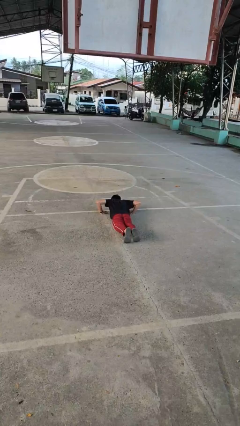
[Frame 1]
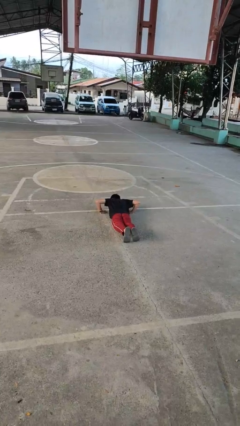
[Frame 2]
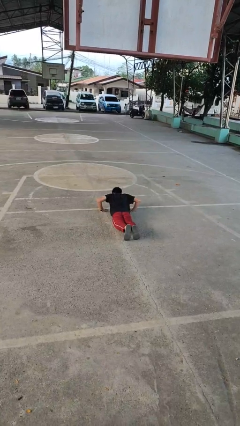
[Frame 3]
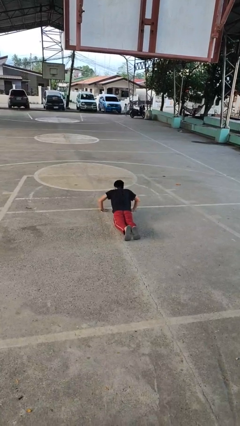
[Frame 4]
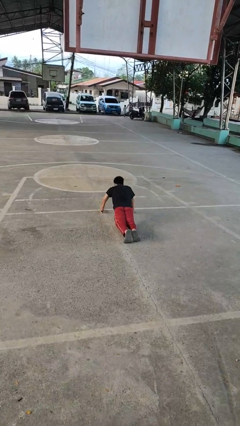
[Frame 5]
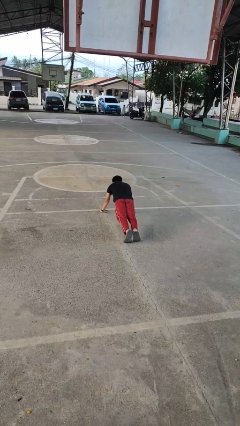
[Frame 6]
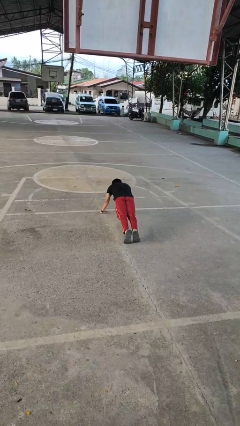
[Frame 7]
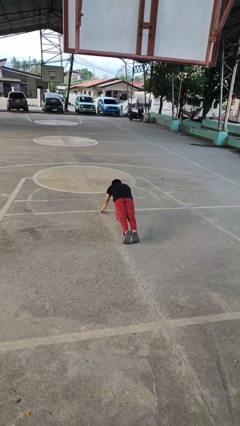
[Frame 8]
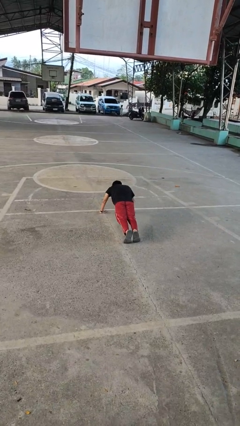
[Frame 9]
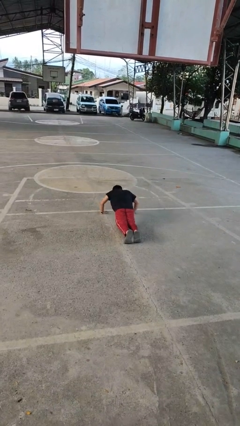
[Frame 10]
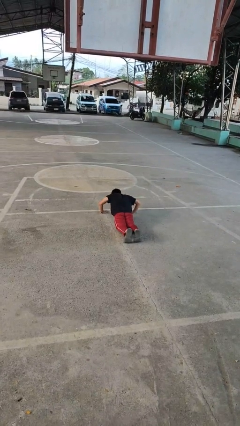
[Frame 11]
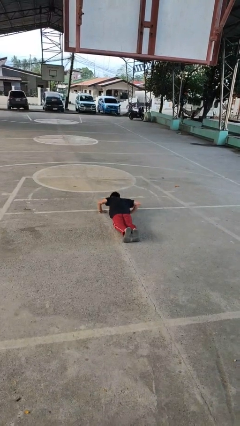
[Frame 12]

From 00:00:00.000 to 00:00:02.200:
person exercises with pushup

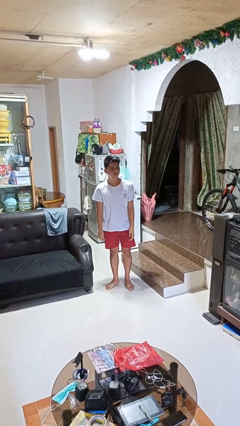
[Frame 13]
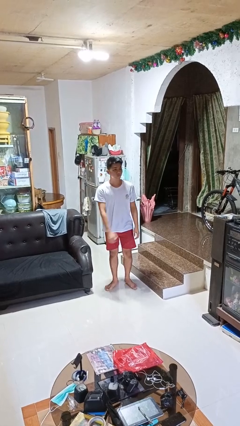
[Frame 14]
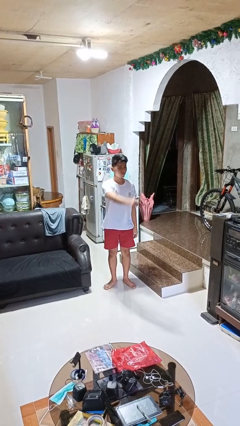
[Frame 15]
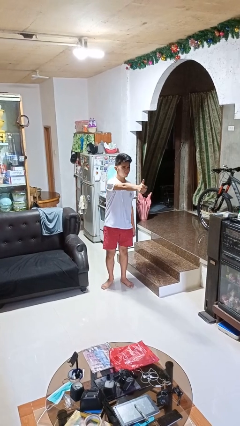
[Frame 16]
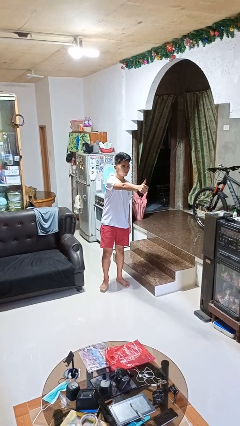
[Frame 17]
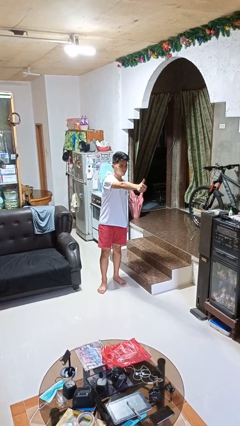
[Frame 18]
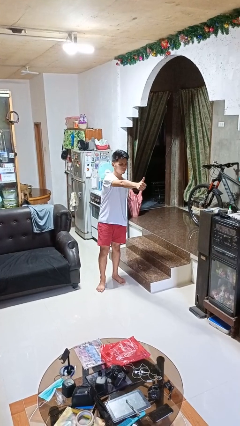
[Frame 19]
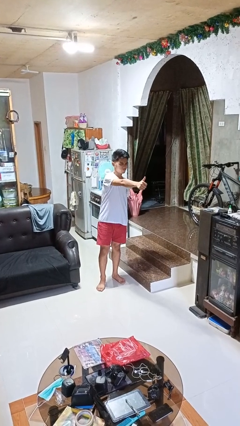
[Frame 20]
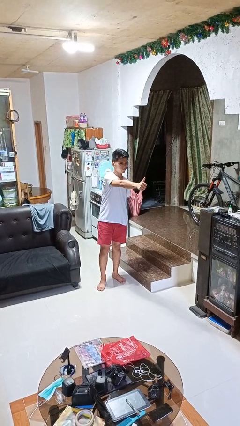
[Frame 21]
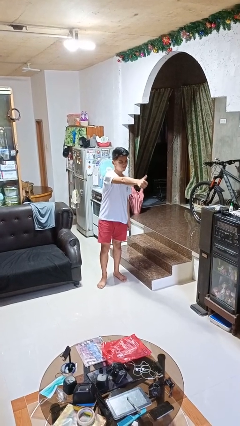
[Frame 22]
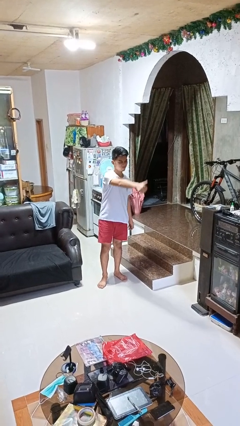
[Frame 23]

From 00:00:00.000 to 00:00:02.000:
person gestures thumbs up

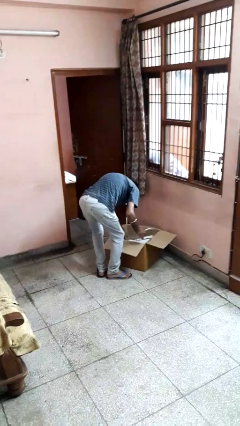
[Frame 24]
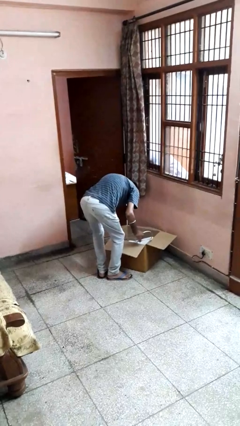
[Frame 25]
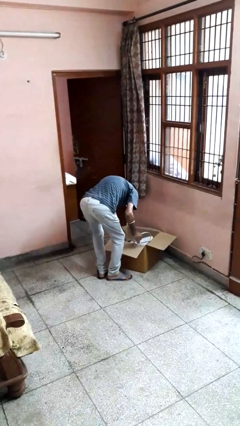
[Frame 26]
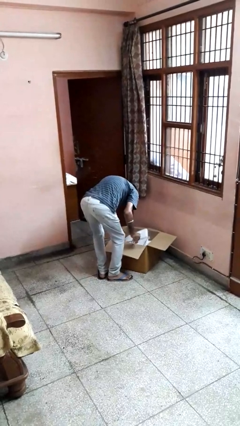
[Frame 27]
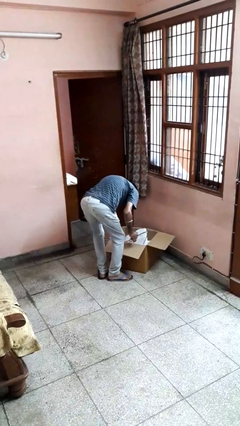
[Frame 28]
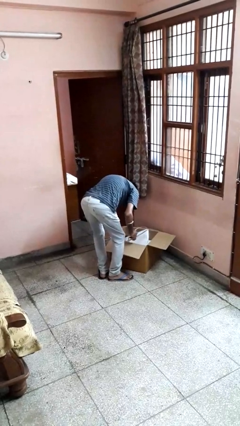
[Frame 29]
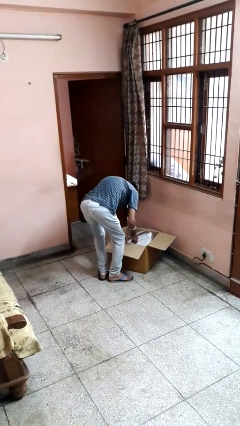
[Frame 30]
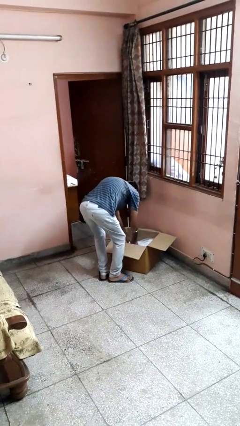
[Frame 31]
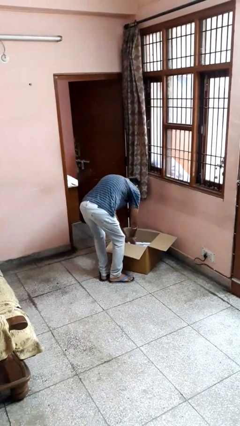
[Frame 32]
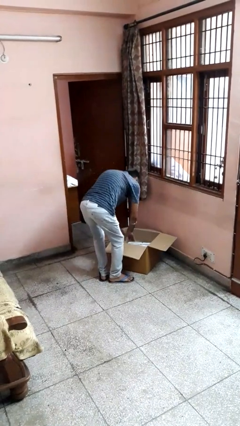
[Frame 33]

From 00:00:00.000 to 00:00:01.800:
person searches in box

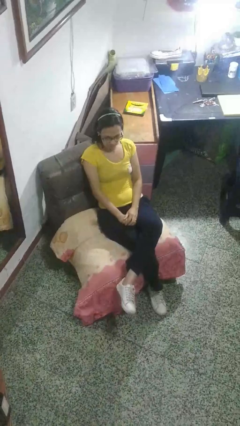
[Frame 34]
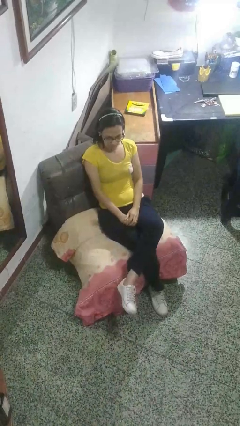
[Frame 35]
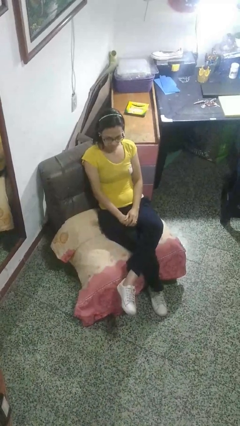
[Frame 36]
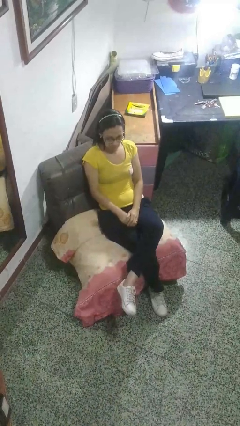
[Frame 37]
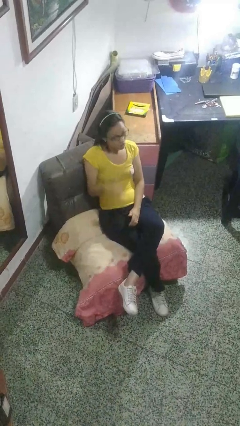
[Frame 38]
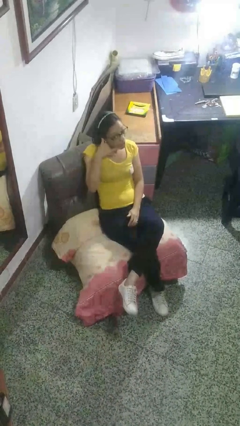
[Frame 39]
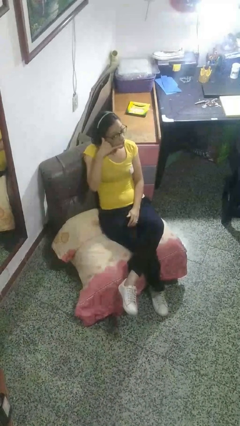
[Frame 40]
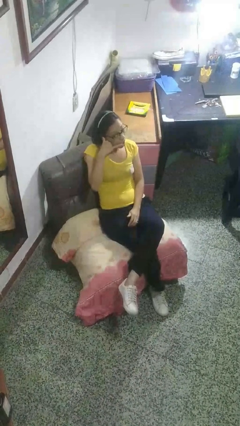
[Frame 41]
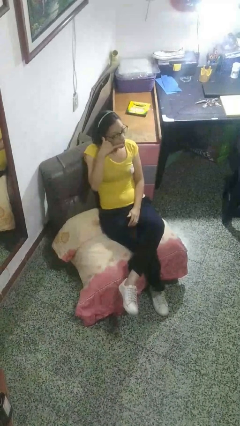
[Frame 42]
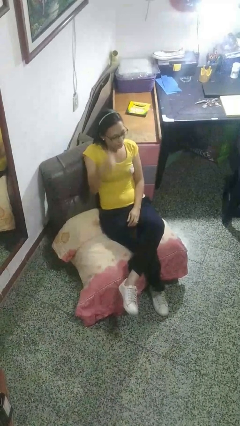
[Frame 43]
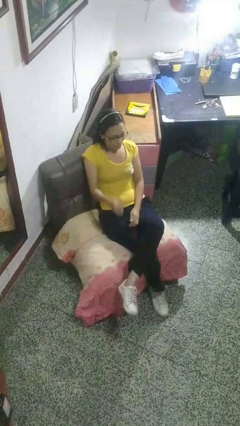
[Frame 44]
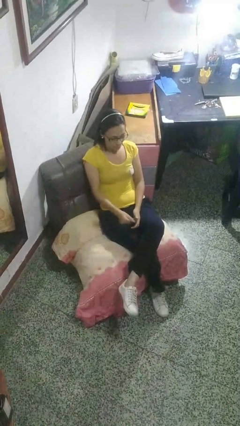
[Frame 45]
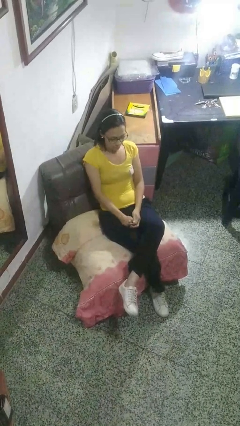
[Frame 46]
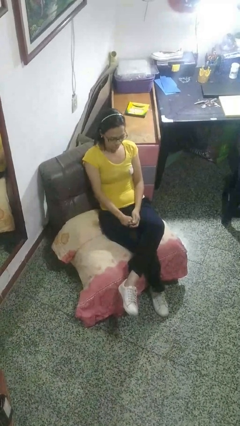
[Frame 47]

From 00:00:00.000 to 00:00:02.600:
person gestures call me

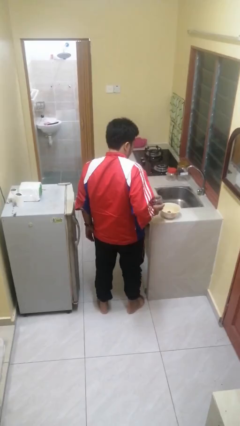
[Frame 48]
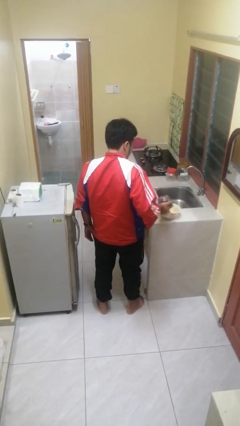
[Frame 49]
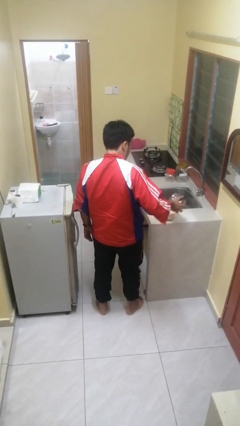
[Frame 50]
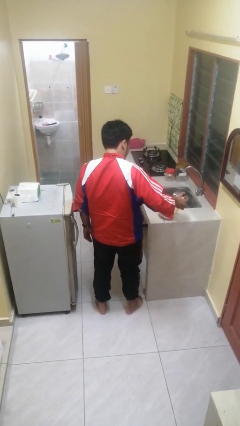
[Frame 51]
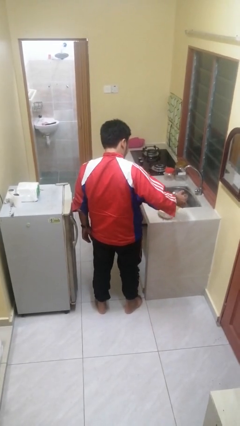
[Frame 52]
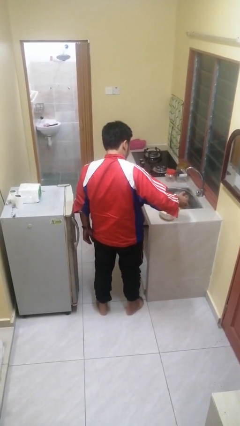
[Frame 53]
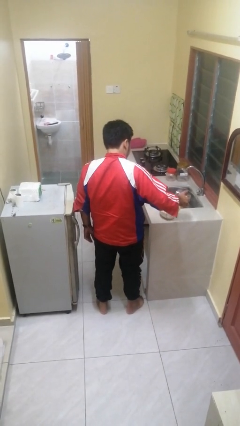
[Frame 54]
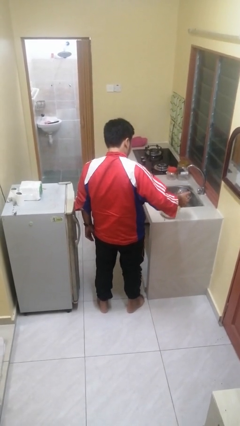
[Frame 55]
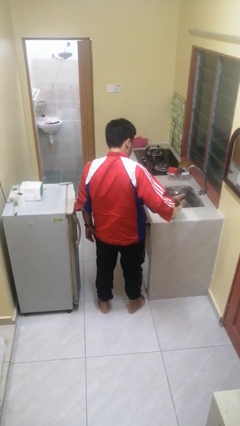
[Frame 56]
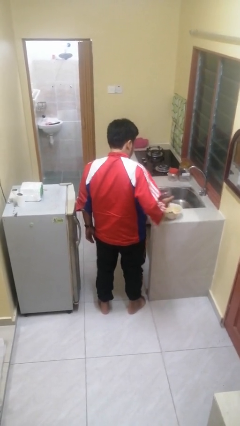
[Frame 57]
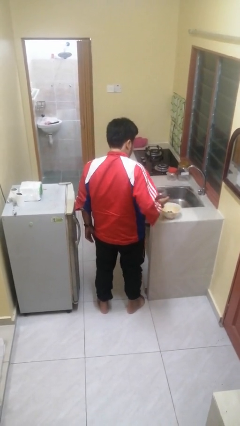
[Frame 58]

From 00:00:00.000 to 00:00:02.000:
person pours into bowl

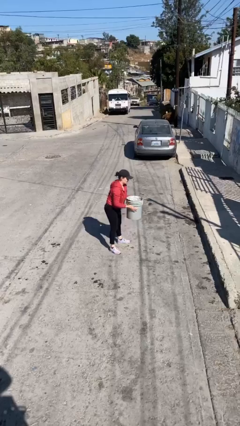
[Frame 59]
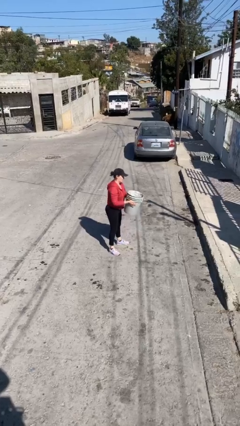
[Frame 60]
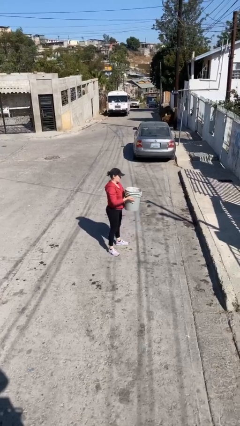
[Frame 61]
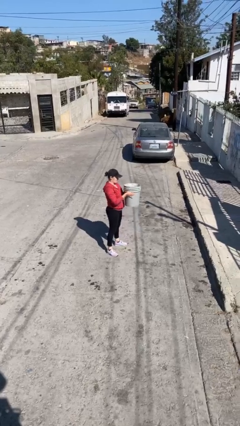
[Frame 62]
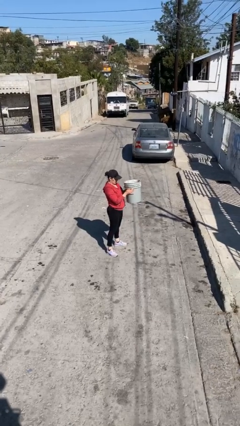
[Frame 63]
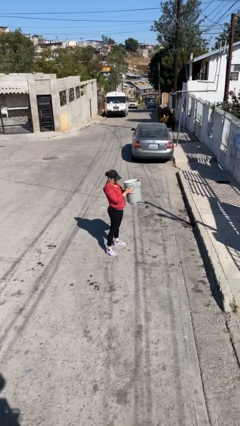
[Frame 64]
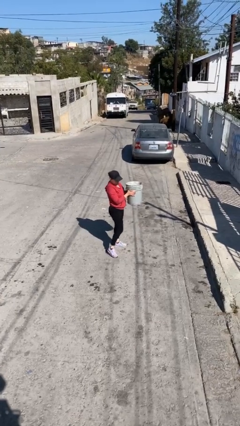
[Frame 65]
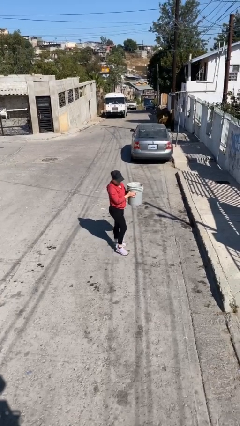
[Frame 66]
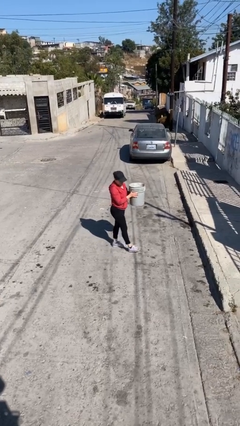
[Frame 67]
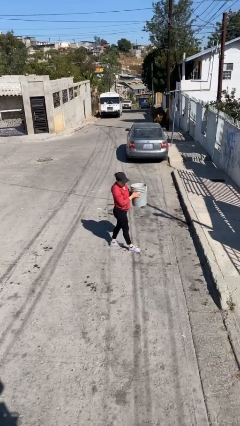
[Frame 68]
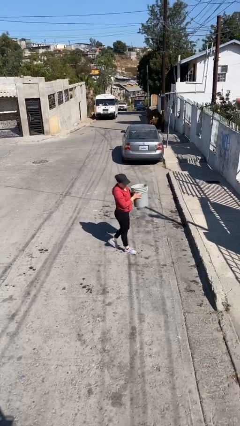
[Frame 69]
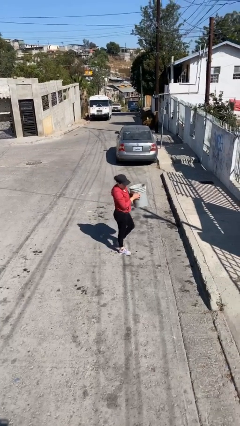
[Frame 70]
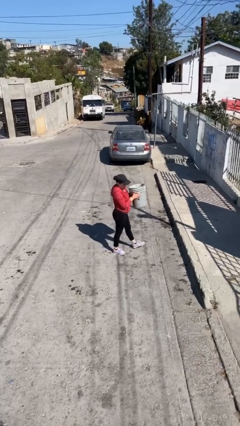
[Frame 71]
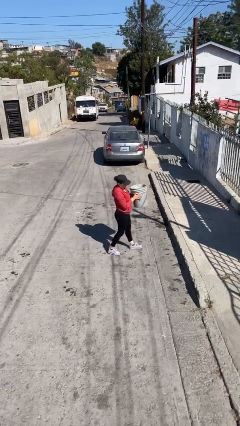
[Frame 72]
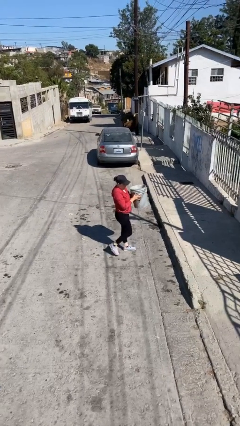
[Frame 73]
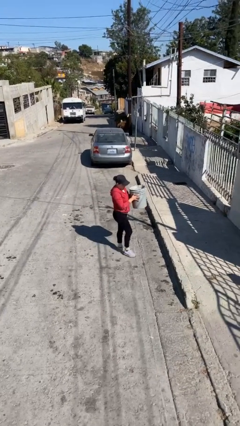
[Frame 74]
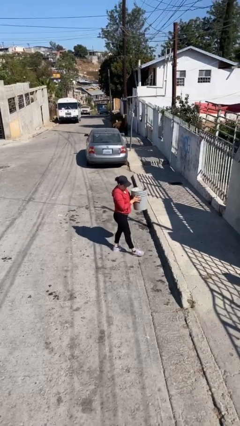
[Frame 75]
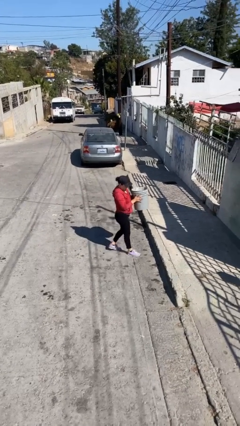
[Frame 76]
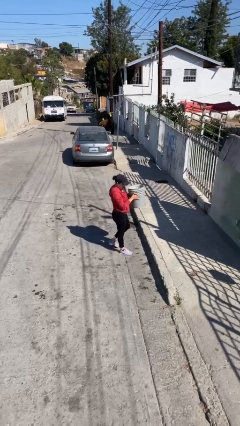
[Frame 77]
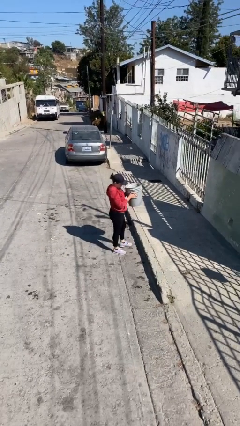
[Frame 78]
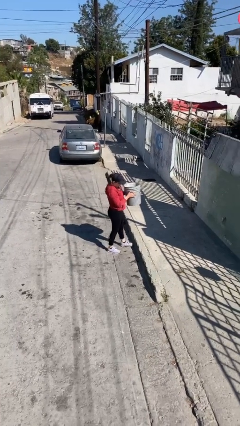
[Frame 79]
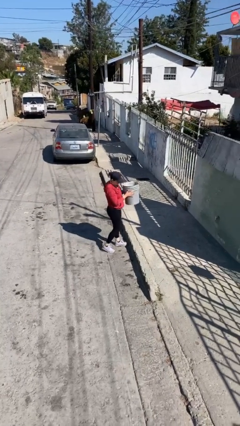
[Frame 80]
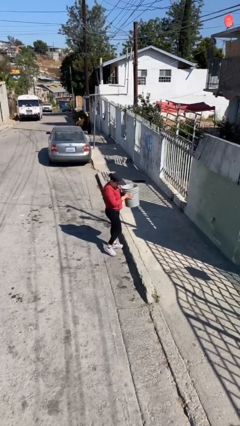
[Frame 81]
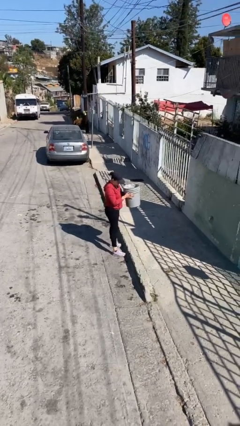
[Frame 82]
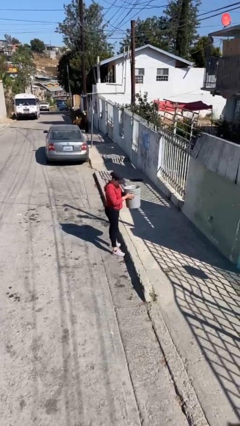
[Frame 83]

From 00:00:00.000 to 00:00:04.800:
person carries heavy object

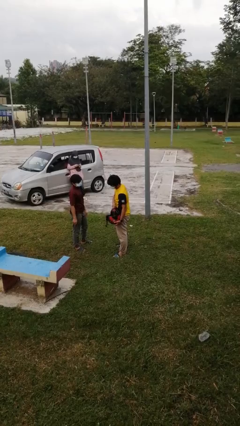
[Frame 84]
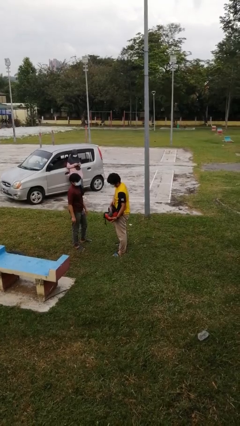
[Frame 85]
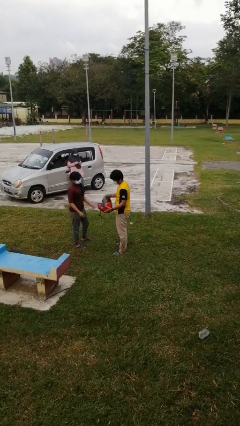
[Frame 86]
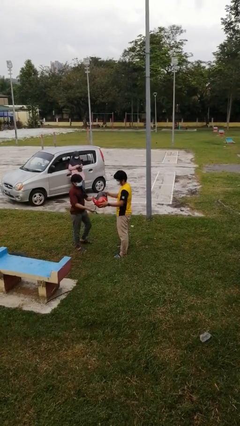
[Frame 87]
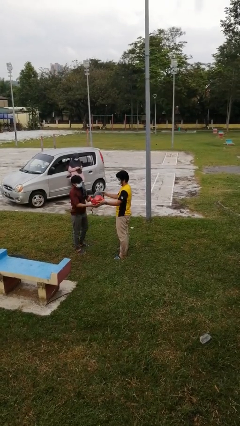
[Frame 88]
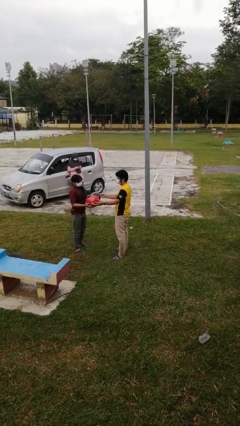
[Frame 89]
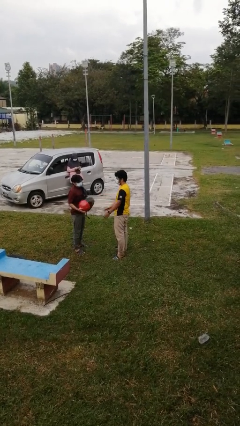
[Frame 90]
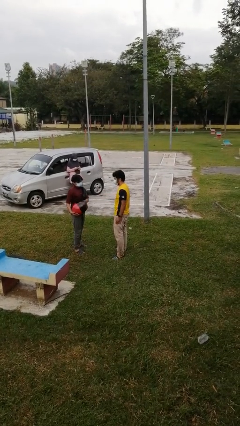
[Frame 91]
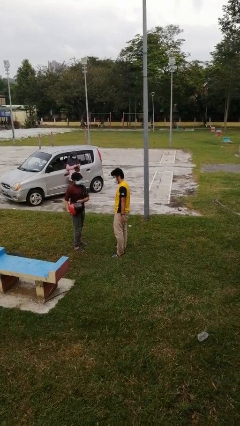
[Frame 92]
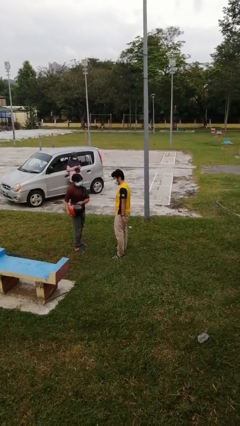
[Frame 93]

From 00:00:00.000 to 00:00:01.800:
person transfers object to person
